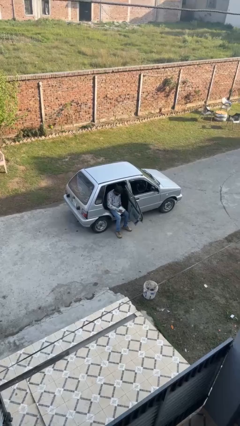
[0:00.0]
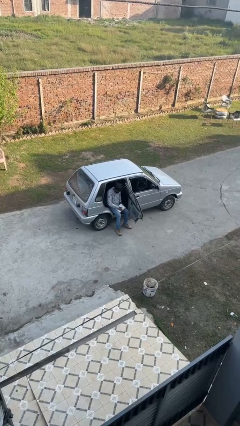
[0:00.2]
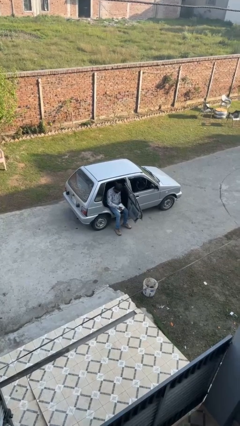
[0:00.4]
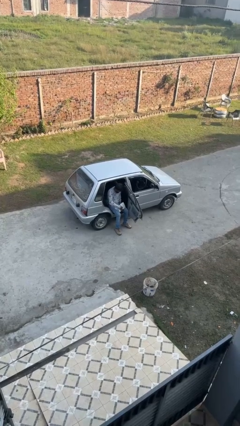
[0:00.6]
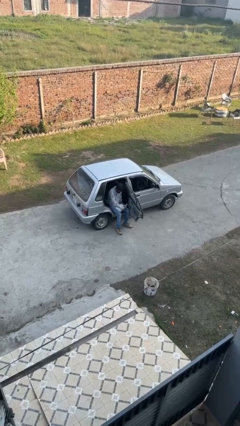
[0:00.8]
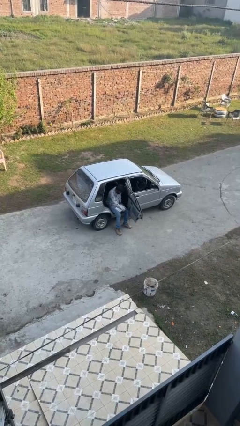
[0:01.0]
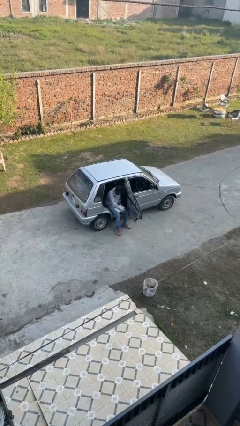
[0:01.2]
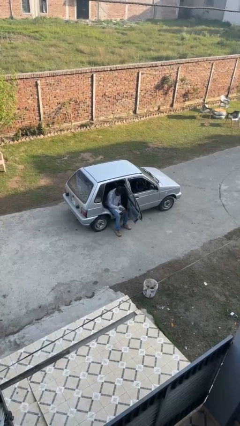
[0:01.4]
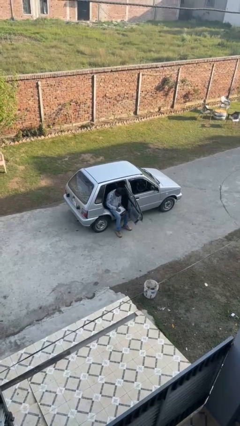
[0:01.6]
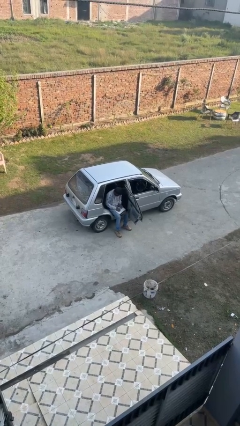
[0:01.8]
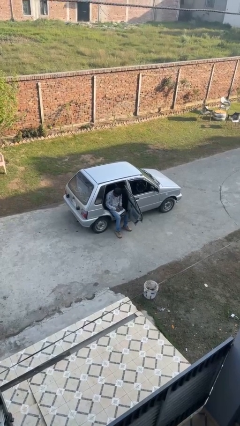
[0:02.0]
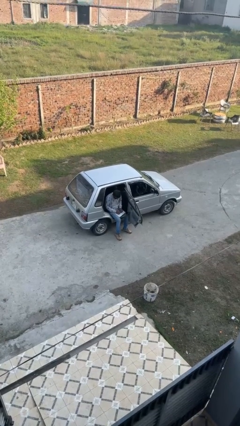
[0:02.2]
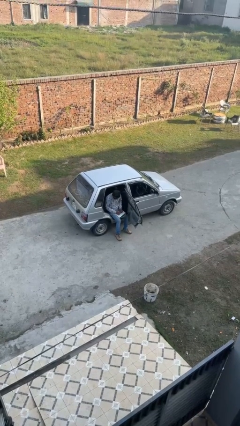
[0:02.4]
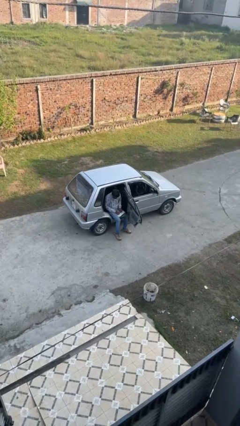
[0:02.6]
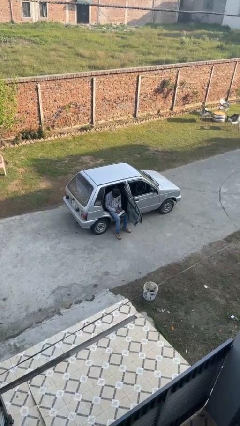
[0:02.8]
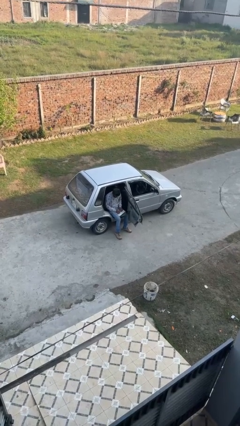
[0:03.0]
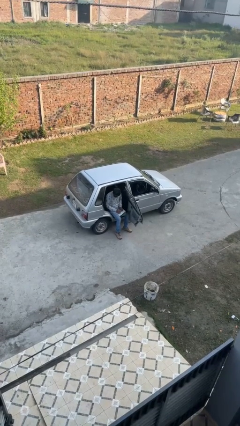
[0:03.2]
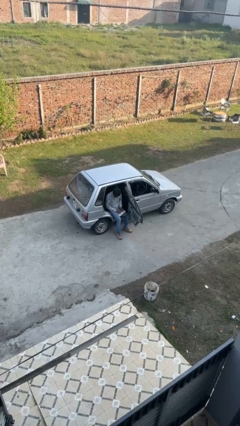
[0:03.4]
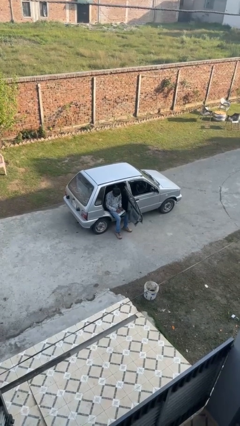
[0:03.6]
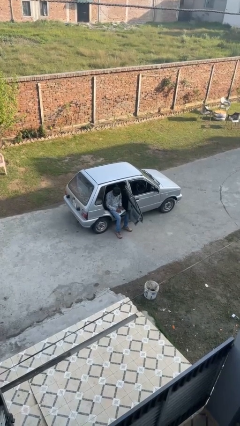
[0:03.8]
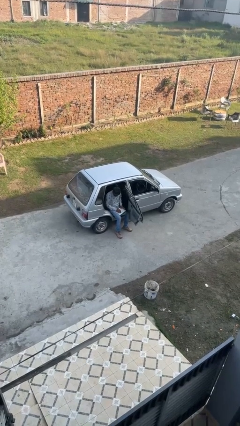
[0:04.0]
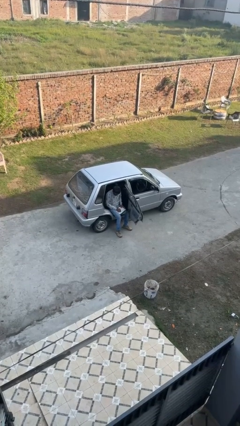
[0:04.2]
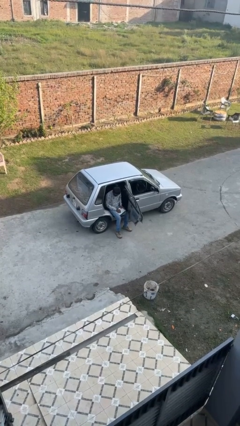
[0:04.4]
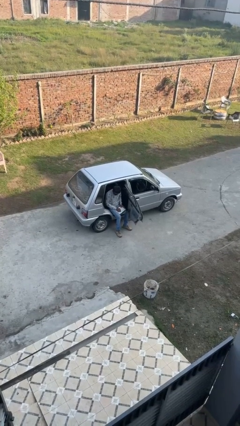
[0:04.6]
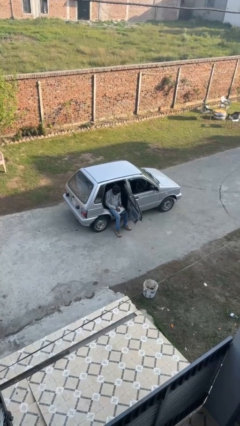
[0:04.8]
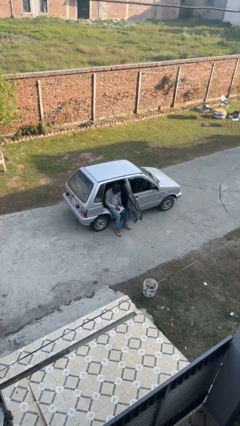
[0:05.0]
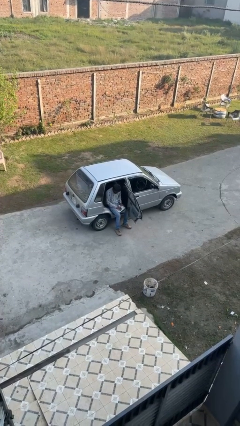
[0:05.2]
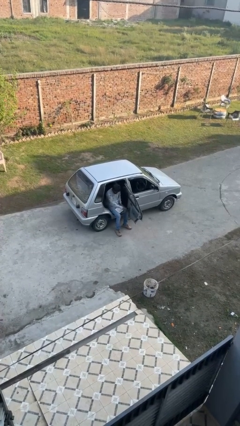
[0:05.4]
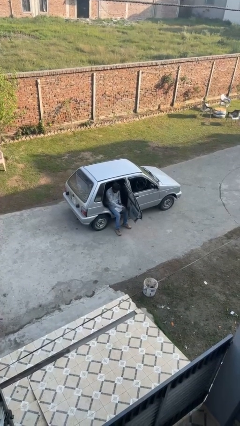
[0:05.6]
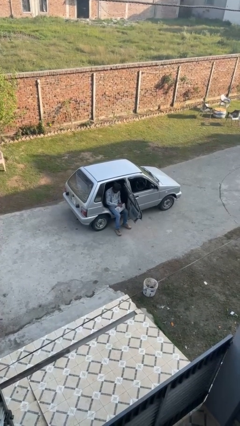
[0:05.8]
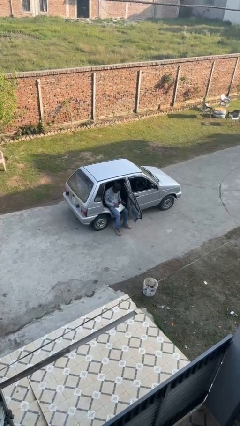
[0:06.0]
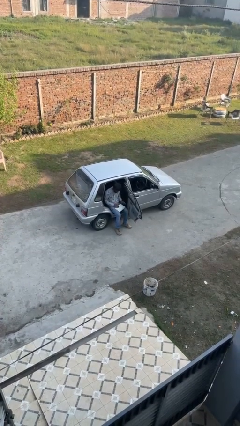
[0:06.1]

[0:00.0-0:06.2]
person interacts with laptop

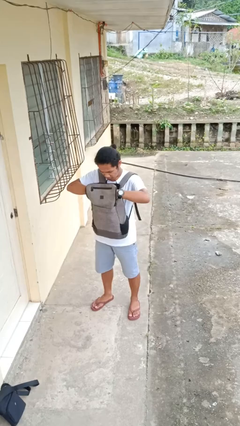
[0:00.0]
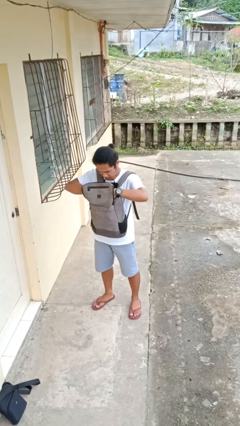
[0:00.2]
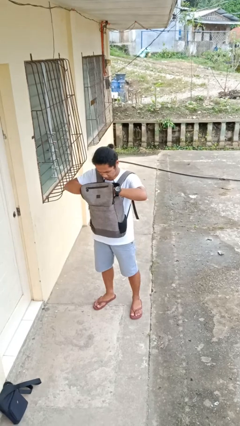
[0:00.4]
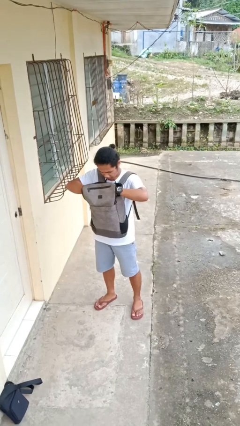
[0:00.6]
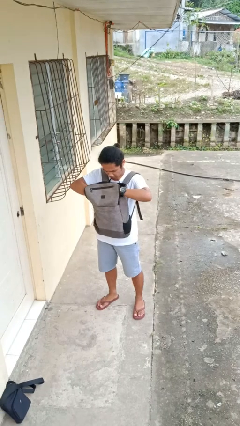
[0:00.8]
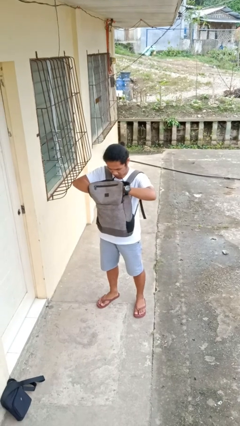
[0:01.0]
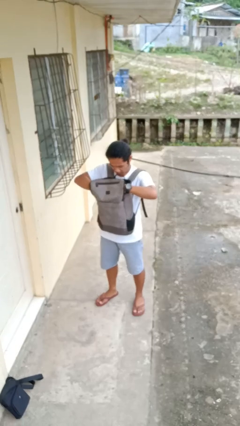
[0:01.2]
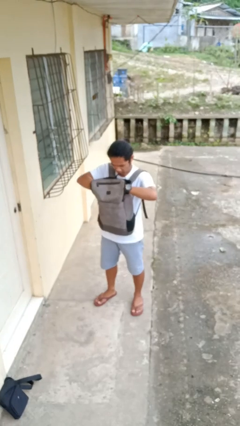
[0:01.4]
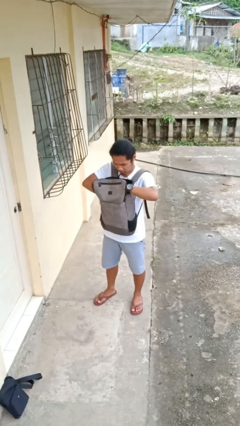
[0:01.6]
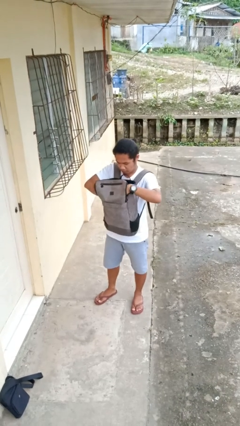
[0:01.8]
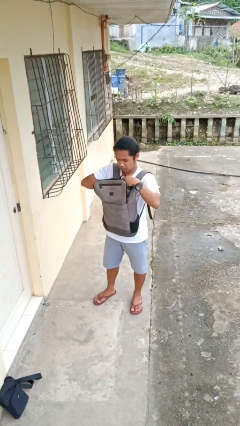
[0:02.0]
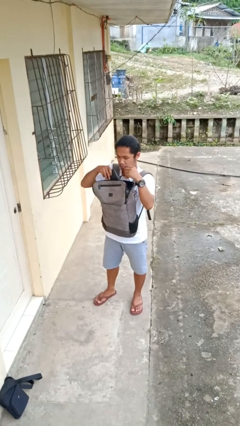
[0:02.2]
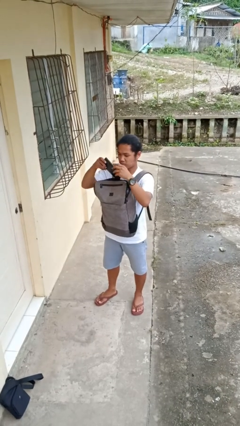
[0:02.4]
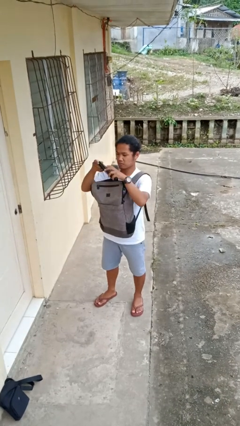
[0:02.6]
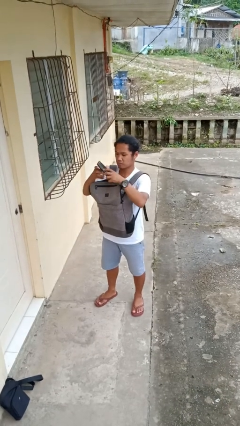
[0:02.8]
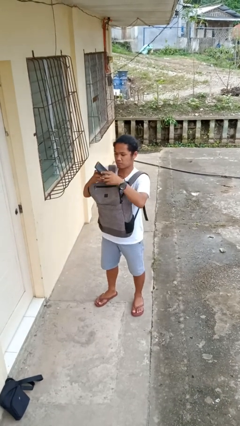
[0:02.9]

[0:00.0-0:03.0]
person searches in backpack

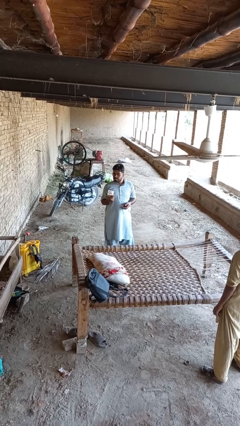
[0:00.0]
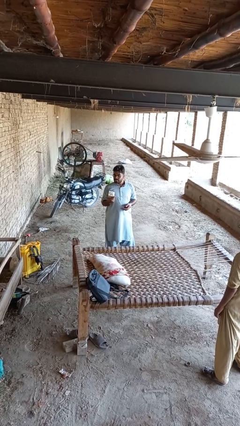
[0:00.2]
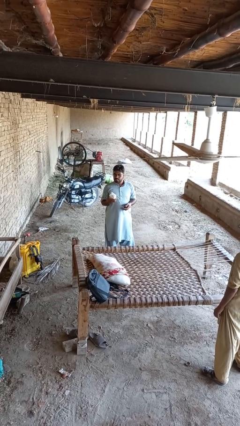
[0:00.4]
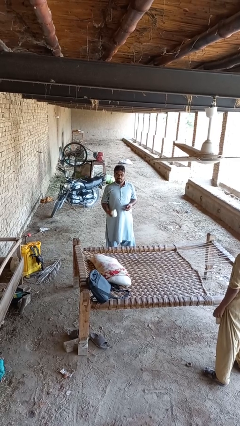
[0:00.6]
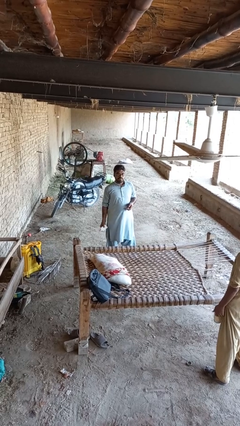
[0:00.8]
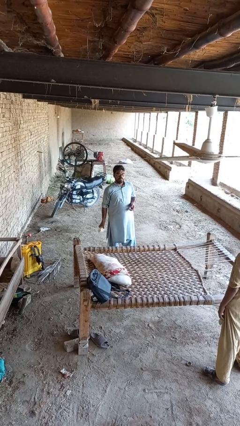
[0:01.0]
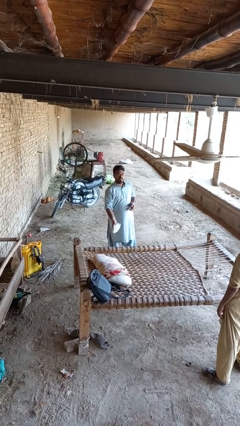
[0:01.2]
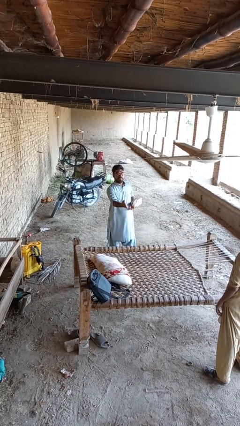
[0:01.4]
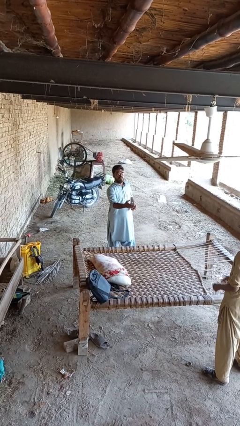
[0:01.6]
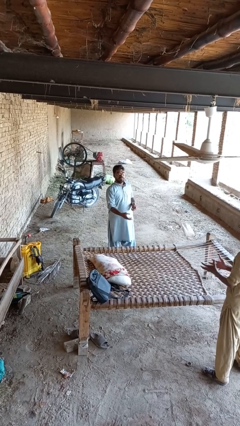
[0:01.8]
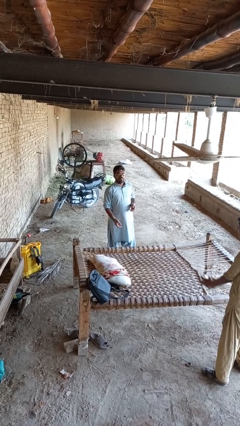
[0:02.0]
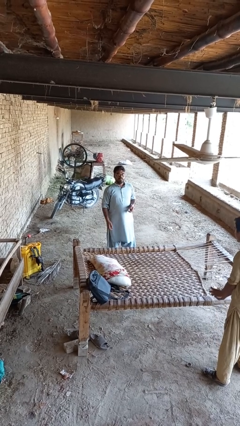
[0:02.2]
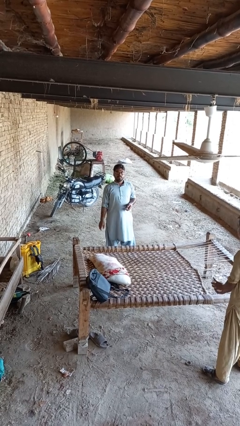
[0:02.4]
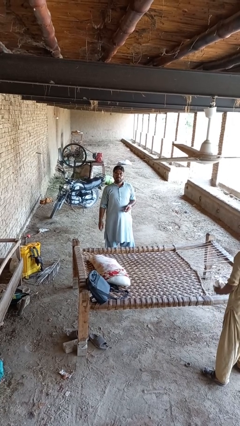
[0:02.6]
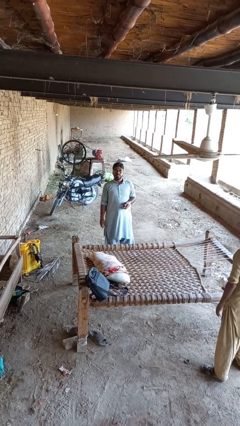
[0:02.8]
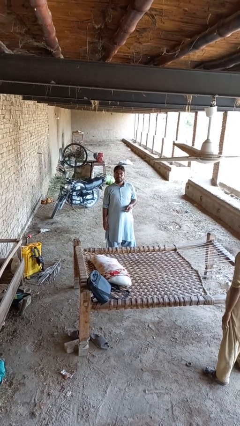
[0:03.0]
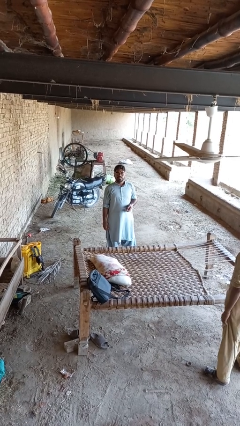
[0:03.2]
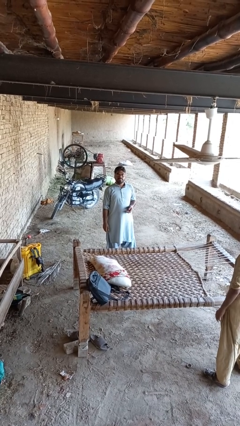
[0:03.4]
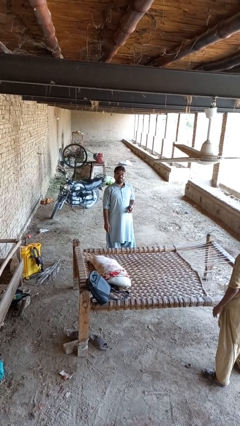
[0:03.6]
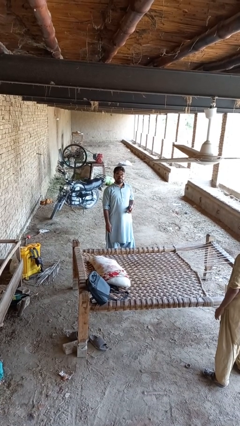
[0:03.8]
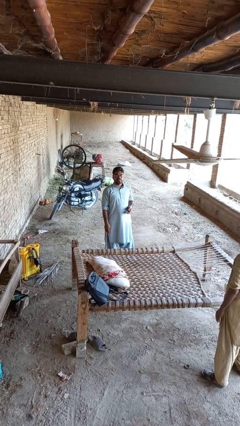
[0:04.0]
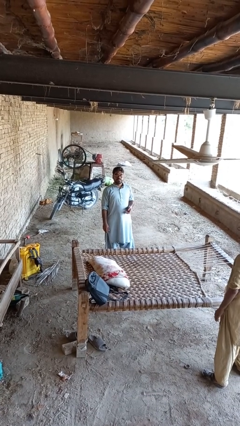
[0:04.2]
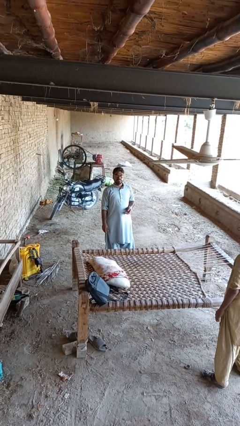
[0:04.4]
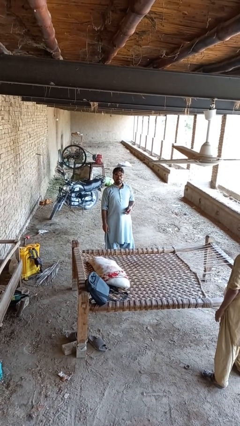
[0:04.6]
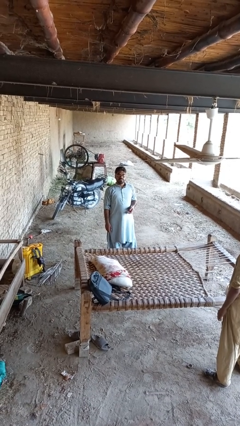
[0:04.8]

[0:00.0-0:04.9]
person throws object to person

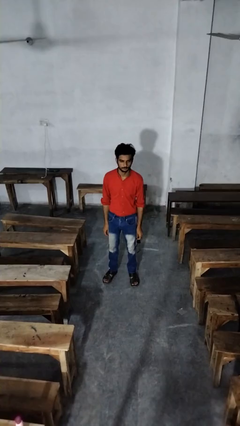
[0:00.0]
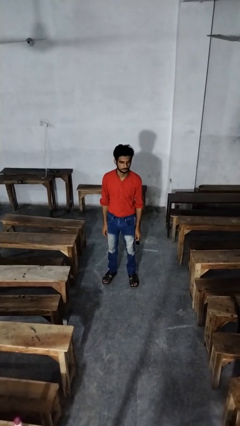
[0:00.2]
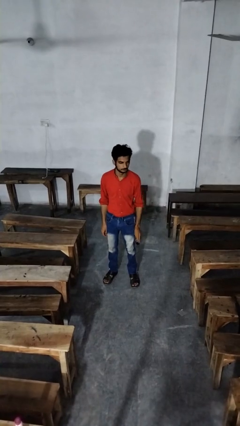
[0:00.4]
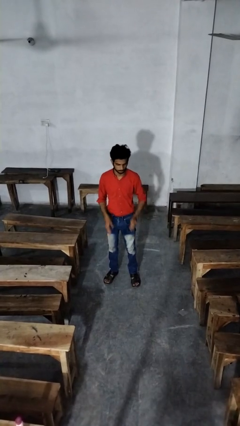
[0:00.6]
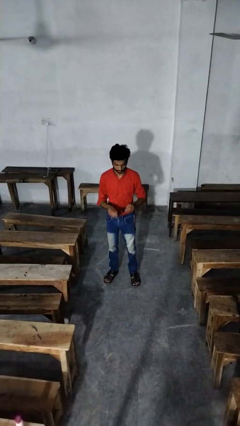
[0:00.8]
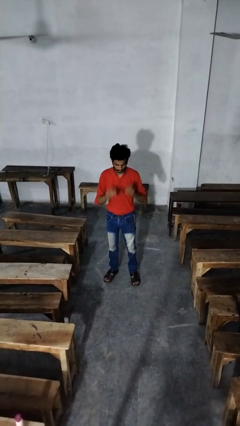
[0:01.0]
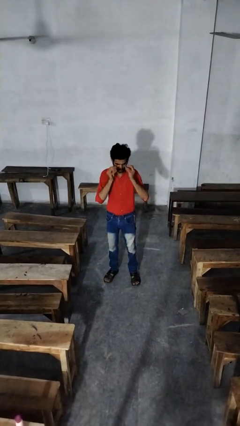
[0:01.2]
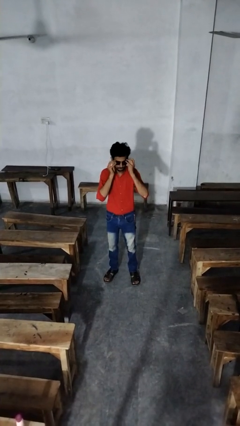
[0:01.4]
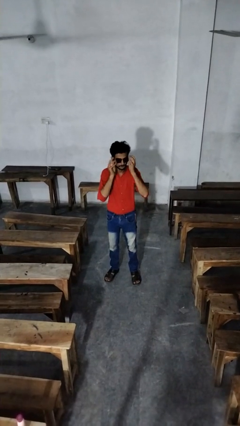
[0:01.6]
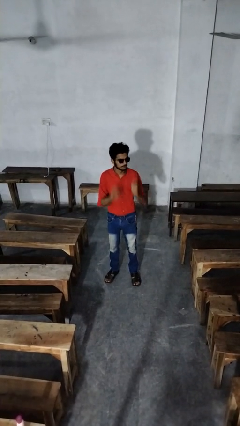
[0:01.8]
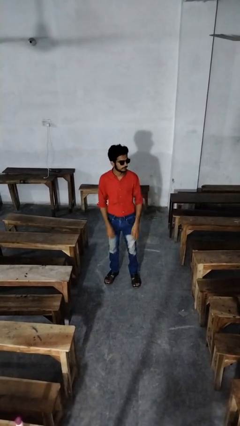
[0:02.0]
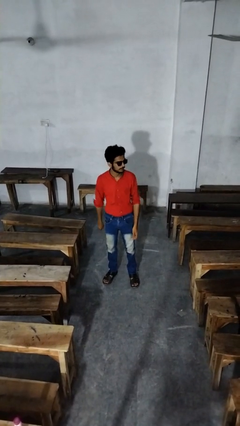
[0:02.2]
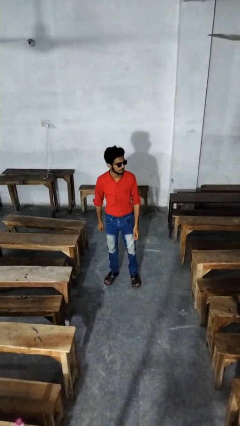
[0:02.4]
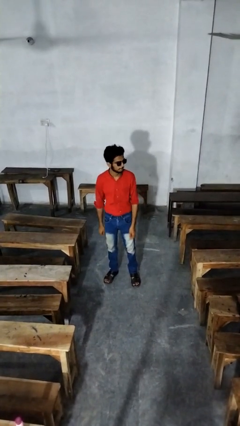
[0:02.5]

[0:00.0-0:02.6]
person puts on sunglasses

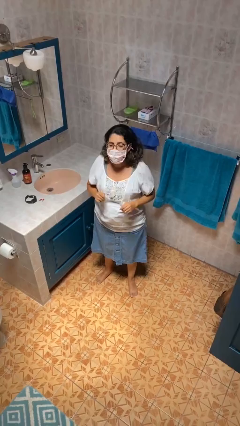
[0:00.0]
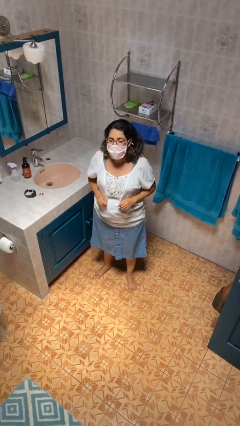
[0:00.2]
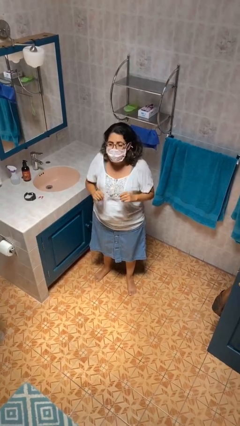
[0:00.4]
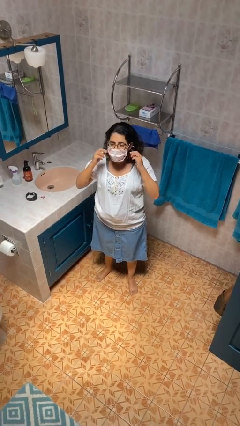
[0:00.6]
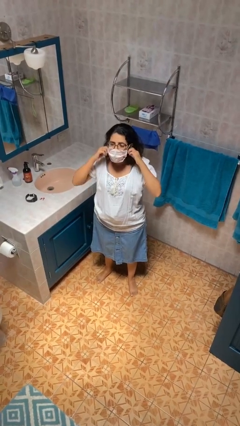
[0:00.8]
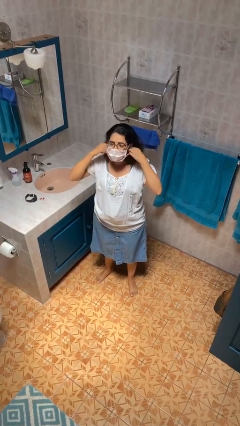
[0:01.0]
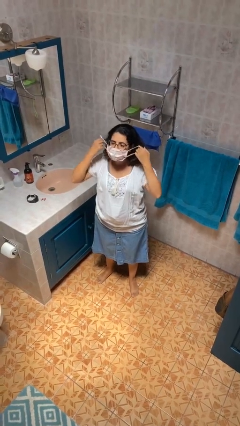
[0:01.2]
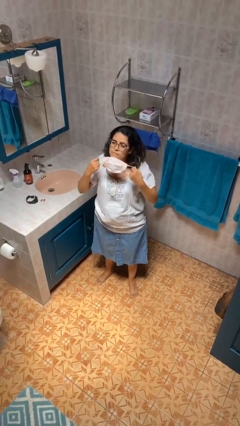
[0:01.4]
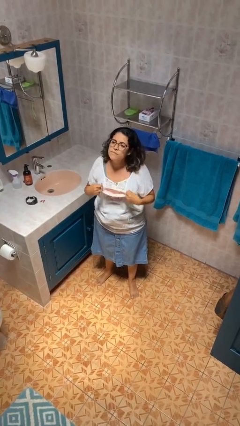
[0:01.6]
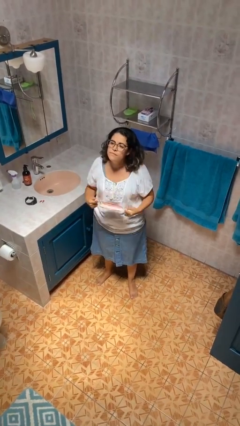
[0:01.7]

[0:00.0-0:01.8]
person takes off facemask
